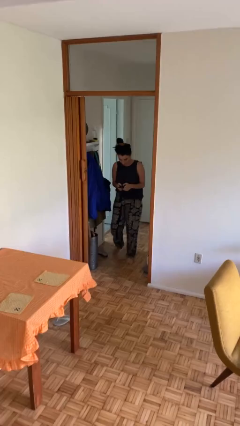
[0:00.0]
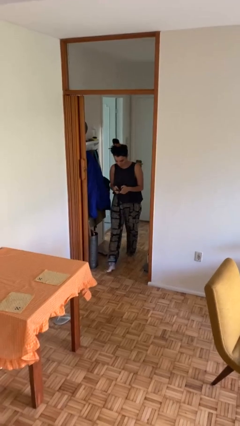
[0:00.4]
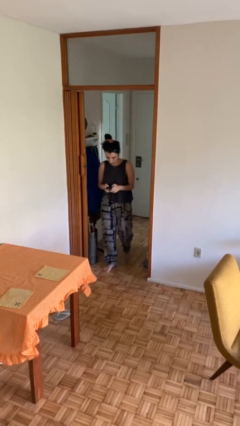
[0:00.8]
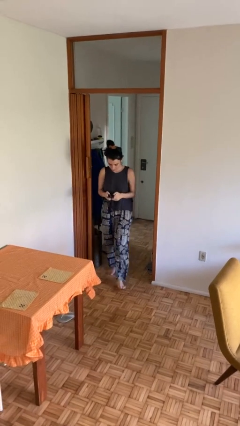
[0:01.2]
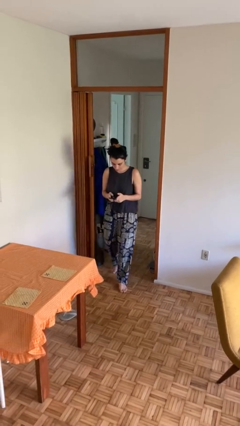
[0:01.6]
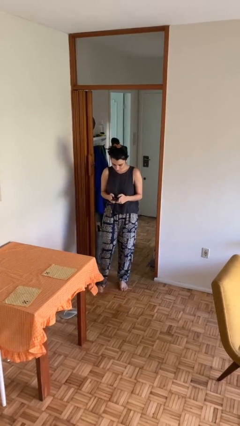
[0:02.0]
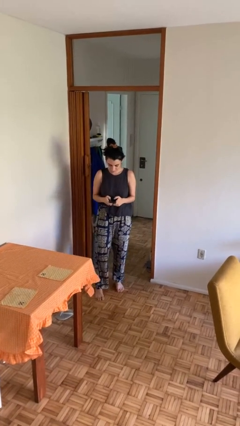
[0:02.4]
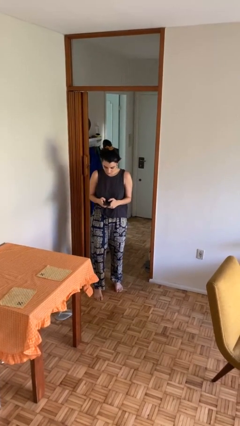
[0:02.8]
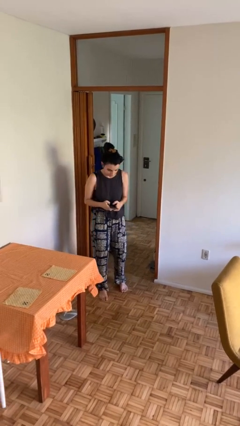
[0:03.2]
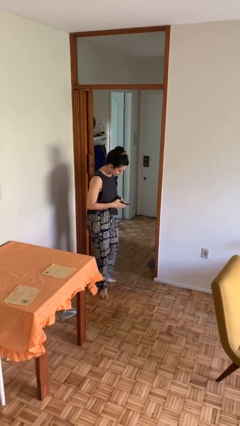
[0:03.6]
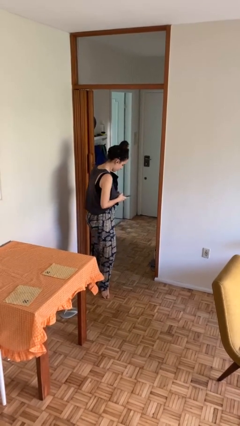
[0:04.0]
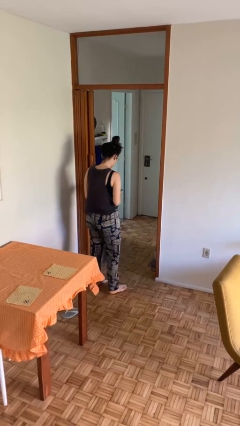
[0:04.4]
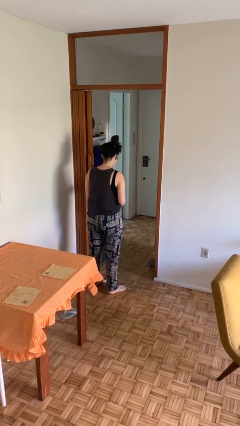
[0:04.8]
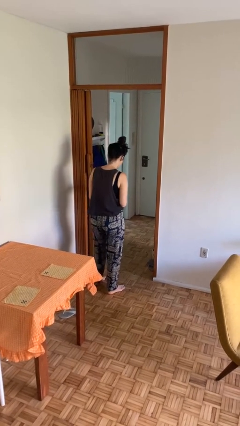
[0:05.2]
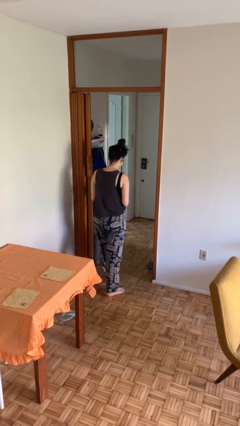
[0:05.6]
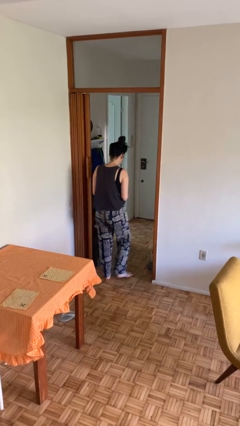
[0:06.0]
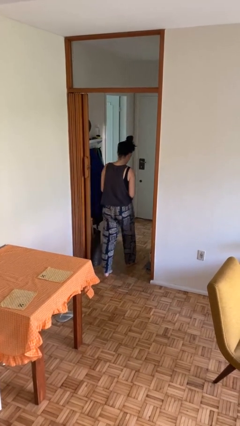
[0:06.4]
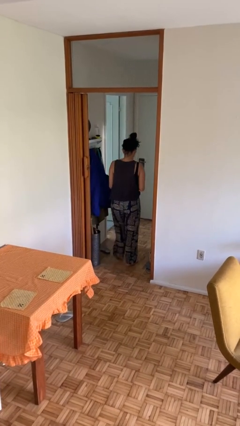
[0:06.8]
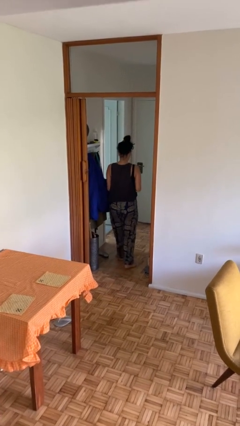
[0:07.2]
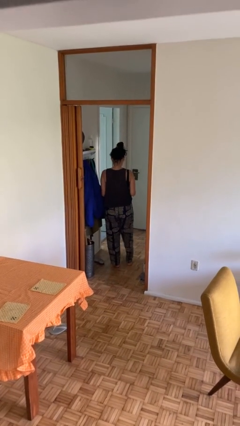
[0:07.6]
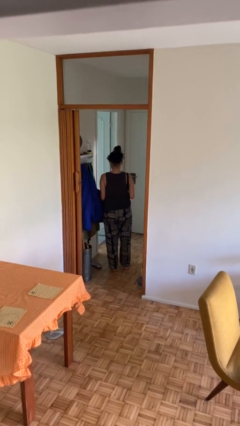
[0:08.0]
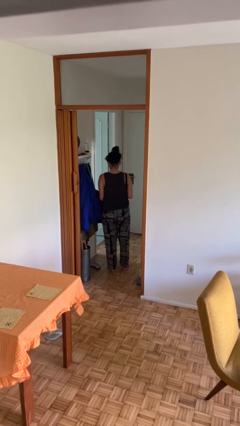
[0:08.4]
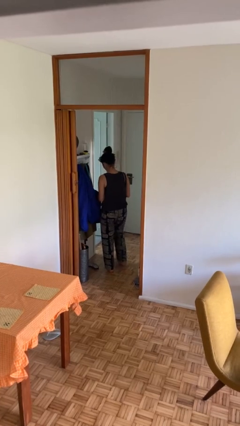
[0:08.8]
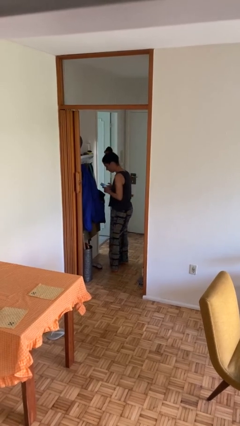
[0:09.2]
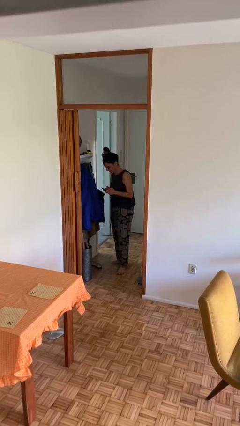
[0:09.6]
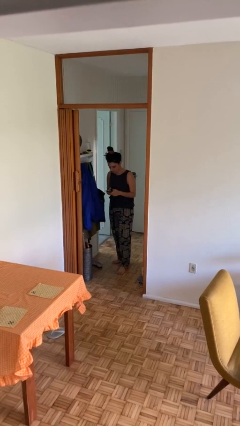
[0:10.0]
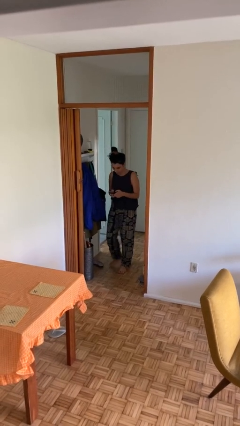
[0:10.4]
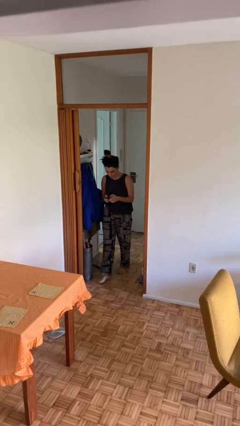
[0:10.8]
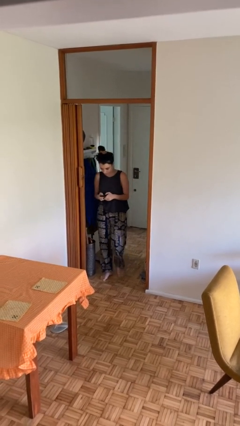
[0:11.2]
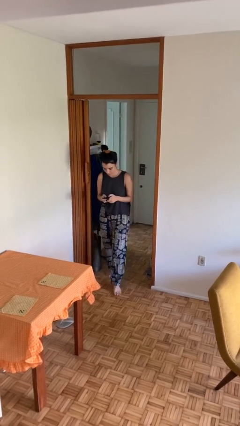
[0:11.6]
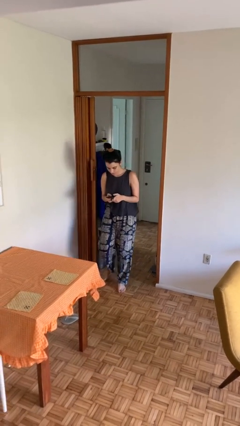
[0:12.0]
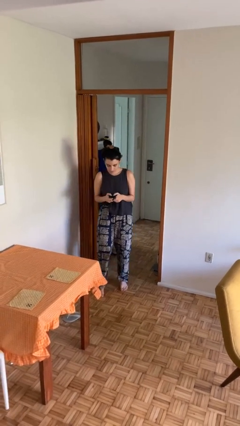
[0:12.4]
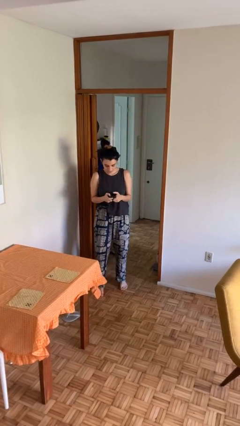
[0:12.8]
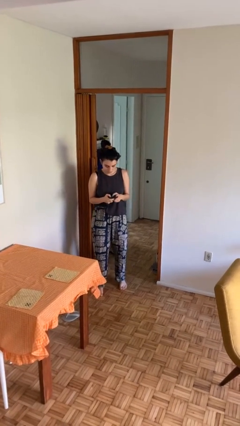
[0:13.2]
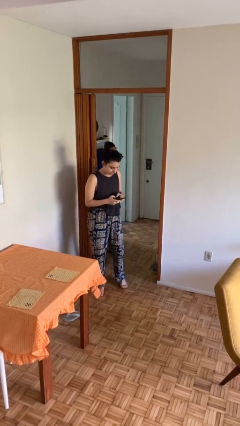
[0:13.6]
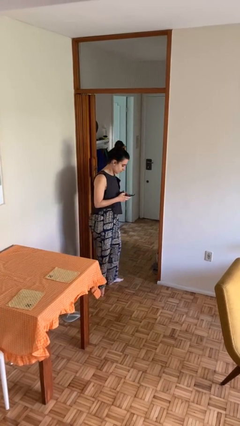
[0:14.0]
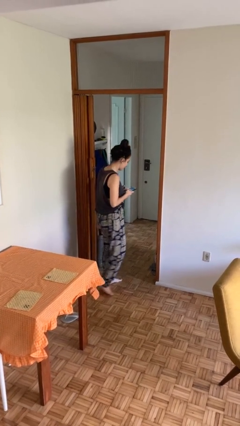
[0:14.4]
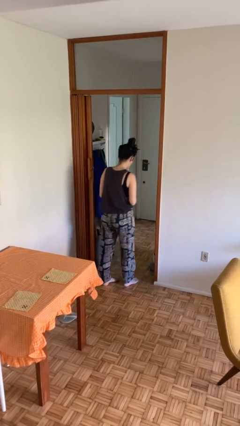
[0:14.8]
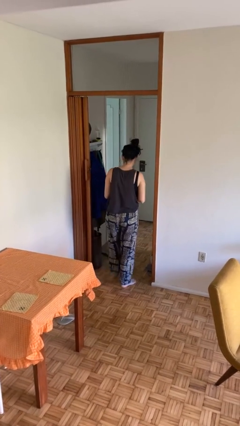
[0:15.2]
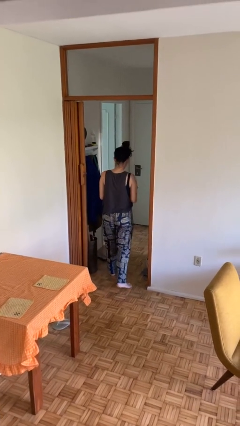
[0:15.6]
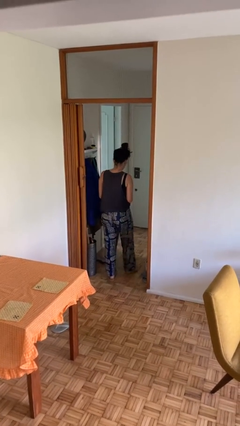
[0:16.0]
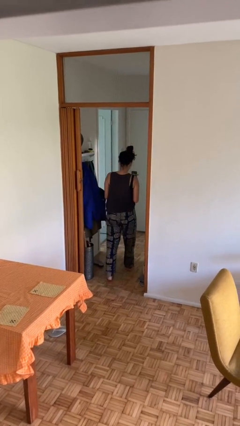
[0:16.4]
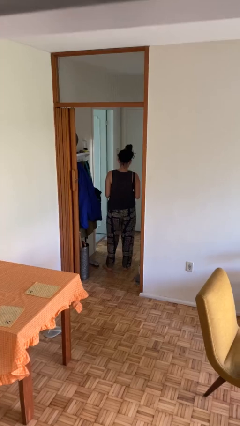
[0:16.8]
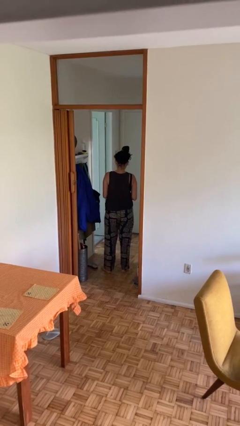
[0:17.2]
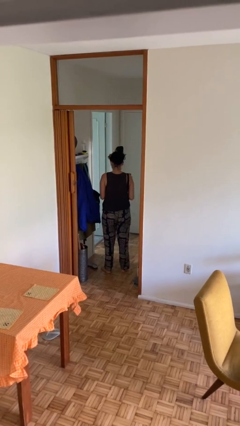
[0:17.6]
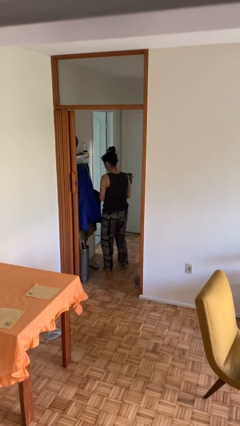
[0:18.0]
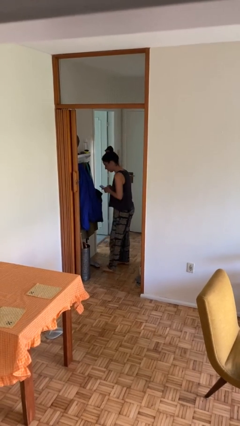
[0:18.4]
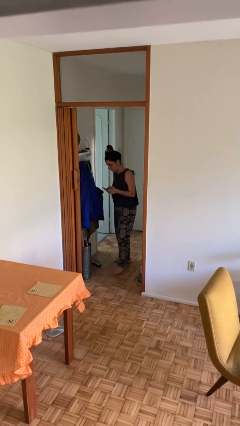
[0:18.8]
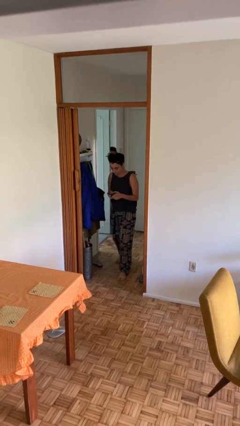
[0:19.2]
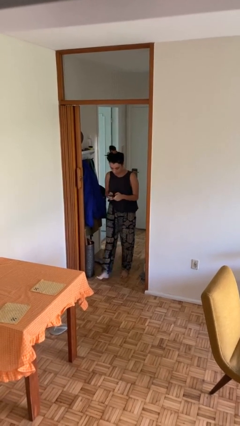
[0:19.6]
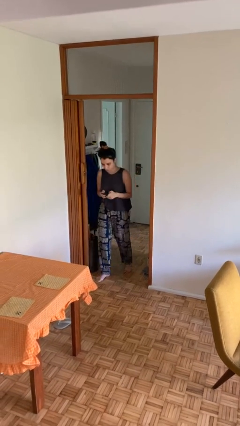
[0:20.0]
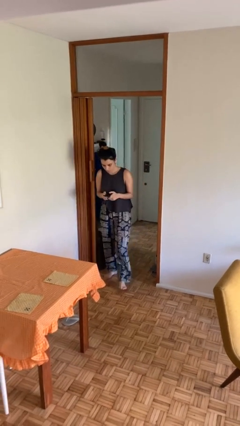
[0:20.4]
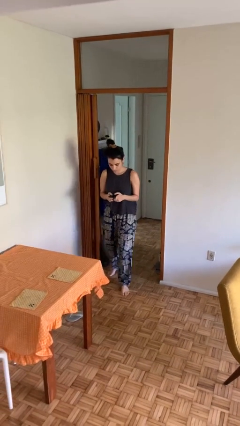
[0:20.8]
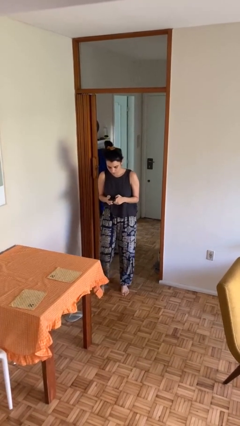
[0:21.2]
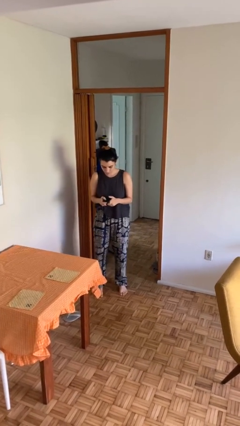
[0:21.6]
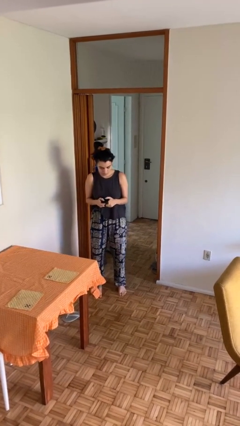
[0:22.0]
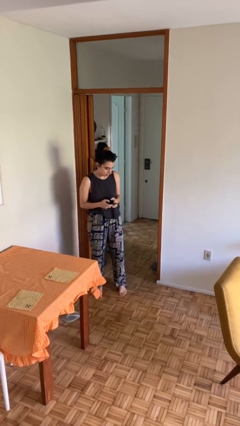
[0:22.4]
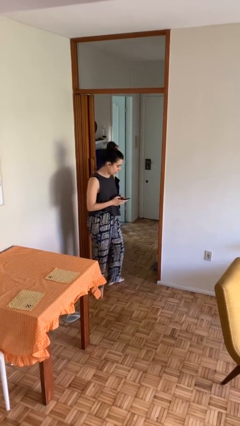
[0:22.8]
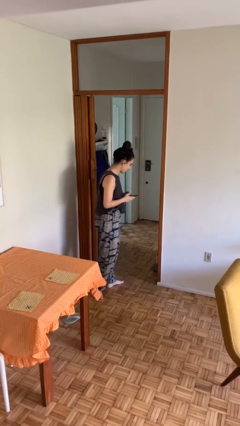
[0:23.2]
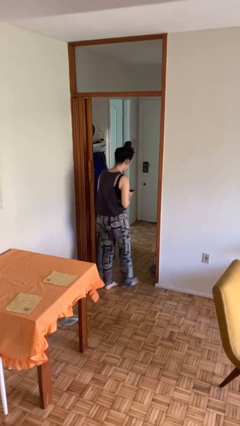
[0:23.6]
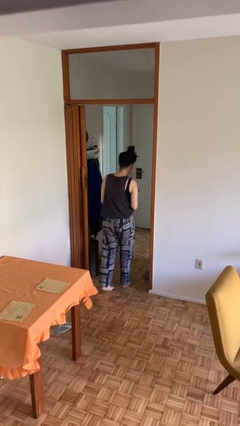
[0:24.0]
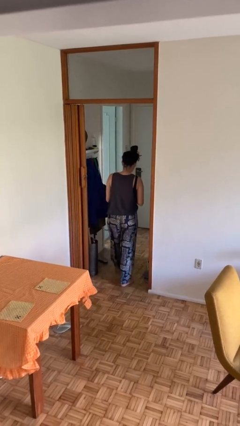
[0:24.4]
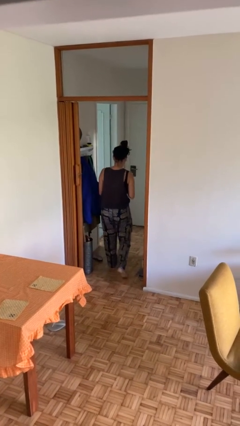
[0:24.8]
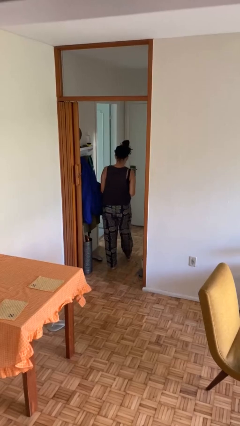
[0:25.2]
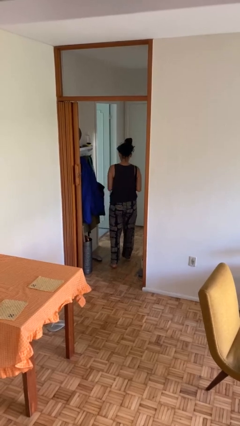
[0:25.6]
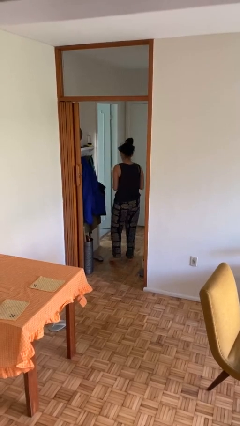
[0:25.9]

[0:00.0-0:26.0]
person texts on phone

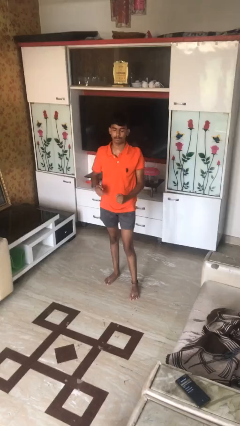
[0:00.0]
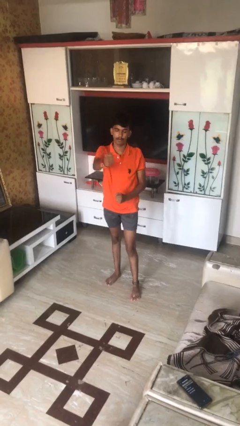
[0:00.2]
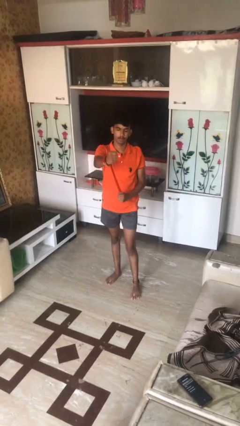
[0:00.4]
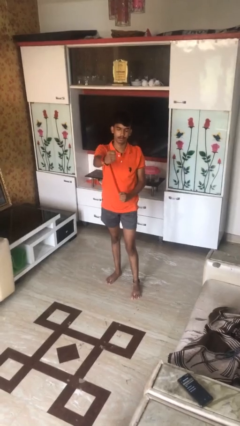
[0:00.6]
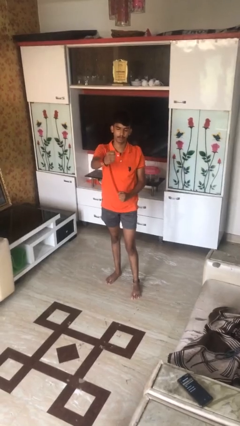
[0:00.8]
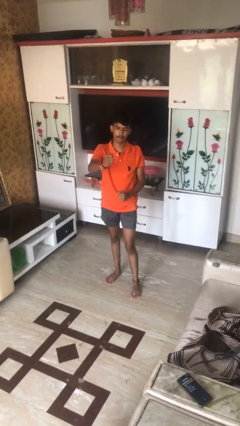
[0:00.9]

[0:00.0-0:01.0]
person punches

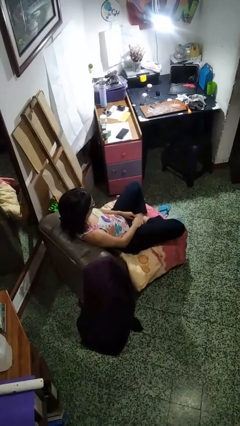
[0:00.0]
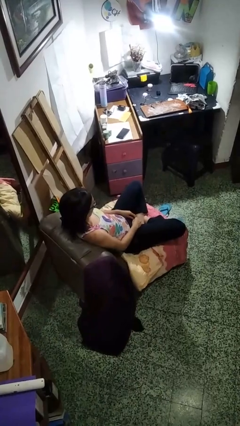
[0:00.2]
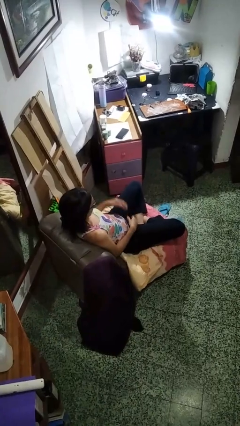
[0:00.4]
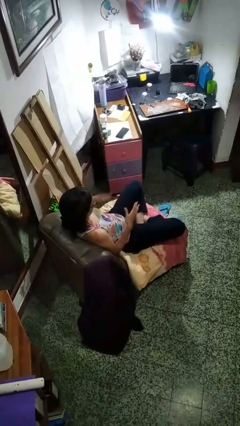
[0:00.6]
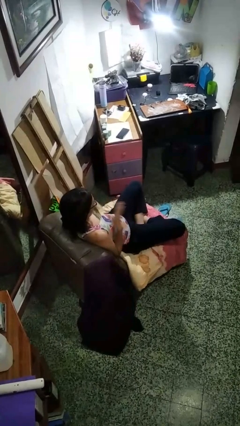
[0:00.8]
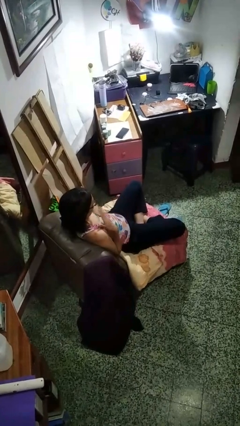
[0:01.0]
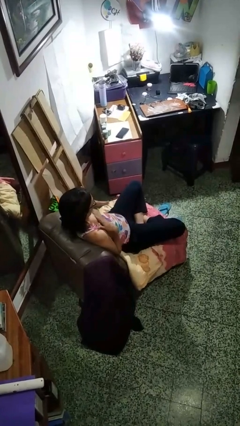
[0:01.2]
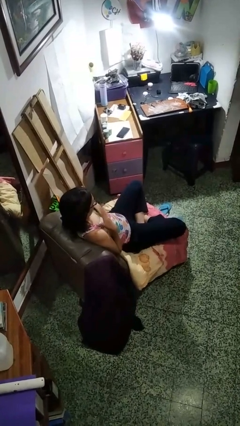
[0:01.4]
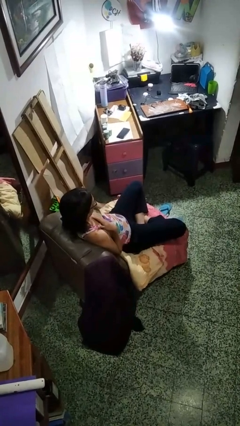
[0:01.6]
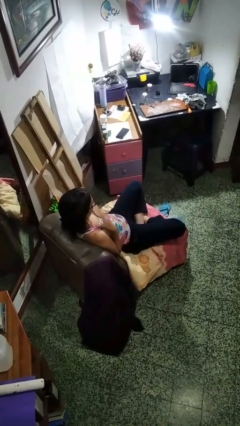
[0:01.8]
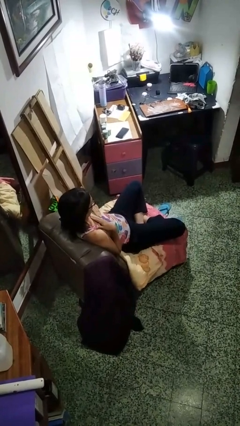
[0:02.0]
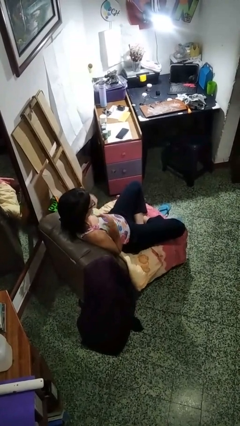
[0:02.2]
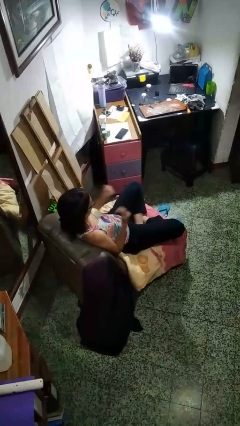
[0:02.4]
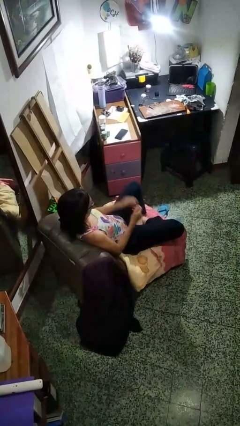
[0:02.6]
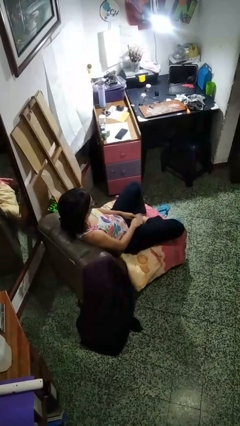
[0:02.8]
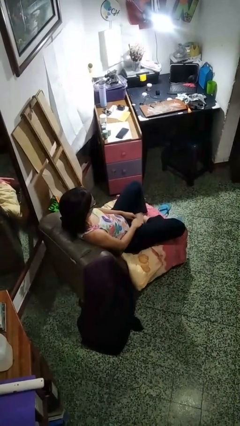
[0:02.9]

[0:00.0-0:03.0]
person drums on chest

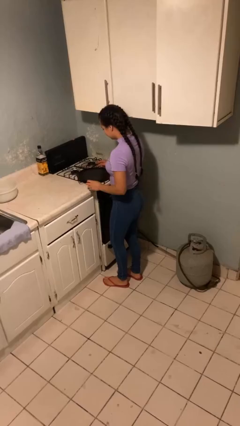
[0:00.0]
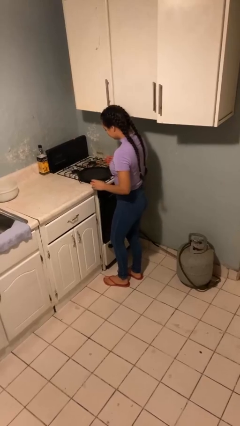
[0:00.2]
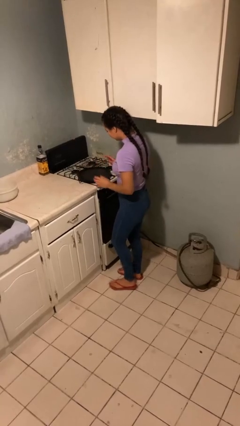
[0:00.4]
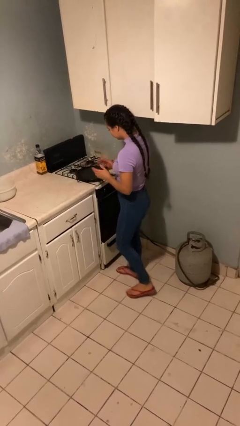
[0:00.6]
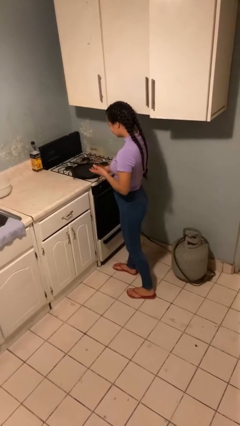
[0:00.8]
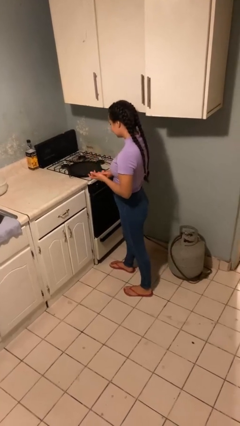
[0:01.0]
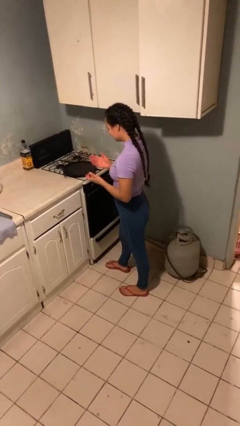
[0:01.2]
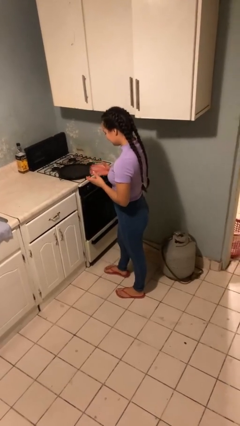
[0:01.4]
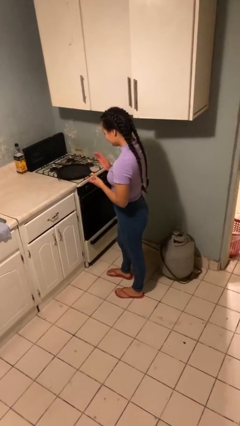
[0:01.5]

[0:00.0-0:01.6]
person burns hand
